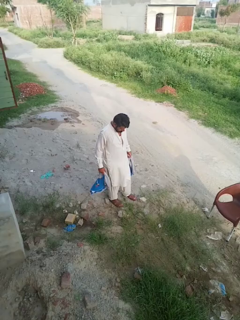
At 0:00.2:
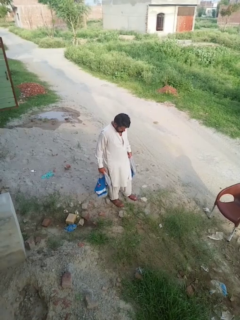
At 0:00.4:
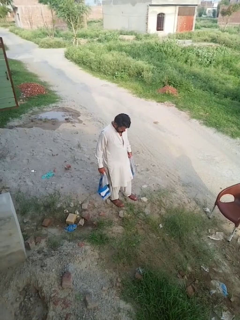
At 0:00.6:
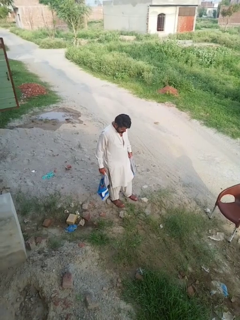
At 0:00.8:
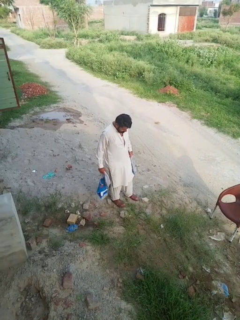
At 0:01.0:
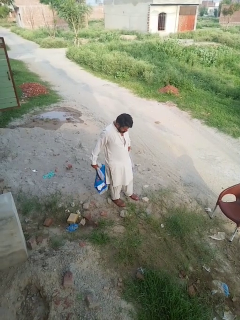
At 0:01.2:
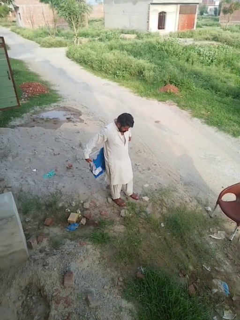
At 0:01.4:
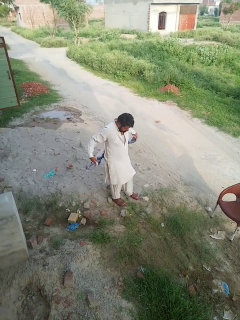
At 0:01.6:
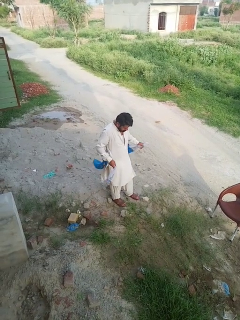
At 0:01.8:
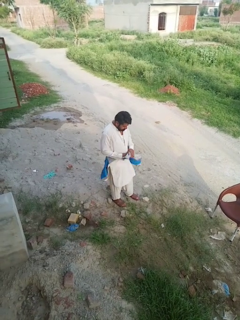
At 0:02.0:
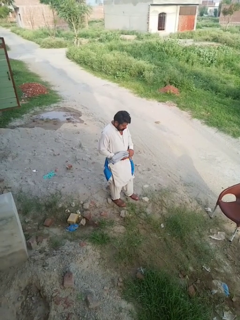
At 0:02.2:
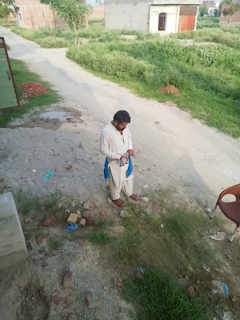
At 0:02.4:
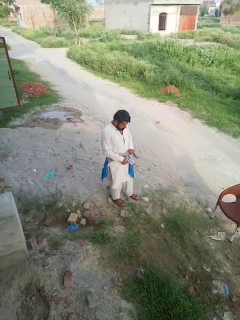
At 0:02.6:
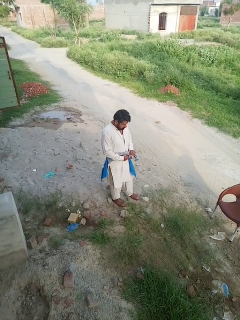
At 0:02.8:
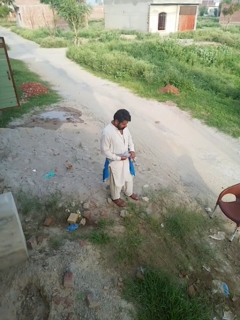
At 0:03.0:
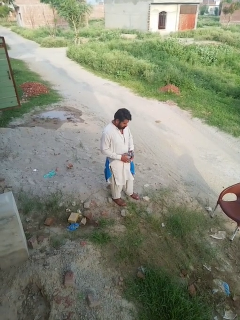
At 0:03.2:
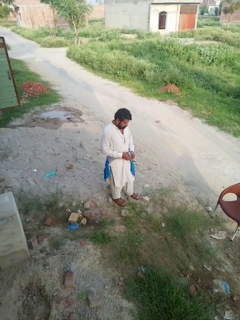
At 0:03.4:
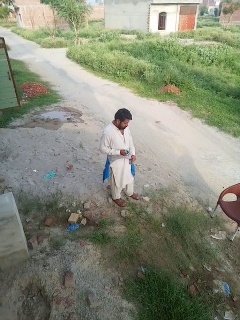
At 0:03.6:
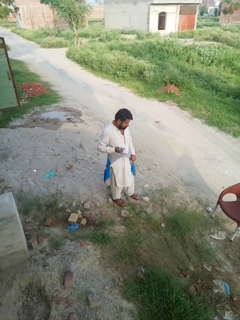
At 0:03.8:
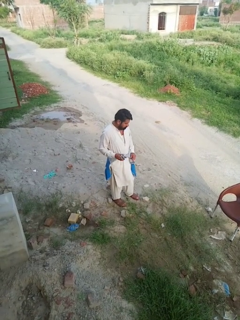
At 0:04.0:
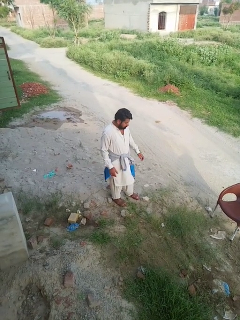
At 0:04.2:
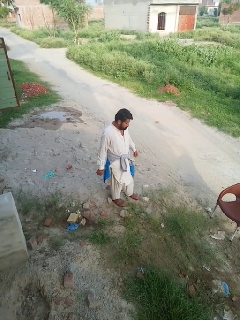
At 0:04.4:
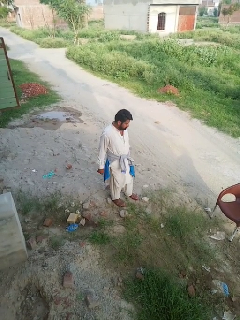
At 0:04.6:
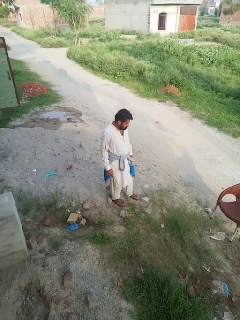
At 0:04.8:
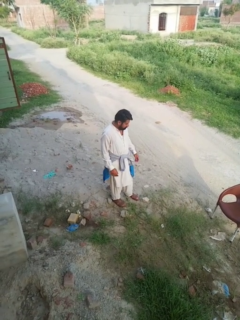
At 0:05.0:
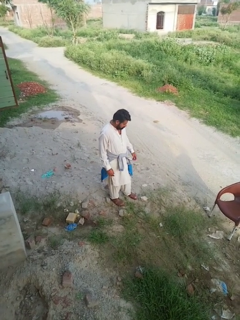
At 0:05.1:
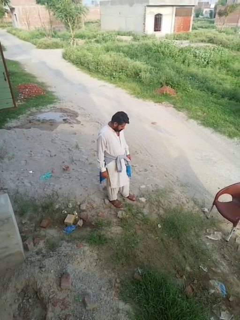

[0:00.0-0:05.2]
person ties jacket around waist

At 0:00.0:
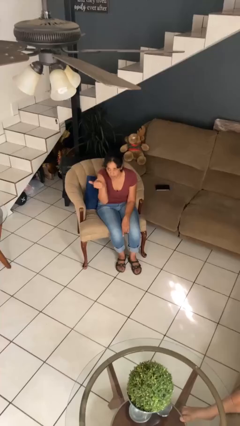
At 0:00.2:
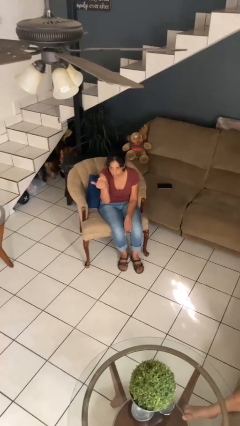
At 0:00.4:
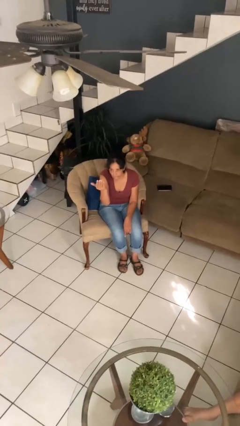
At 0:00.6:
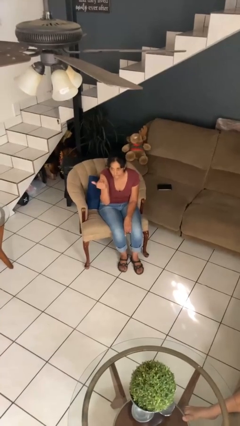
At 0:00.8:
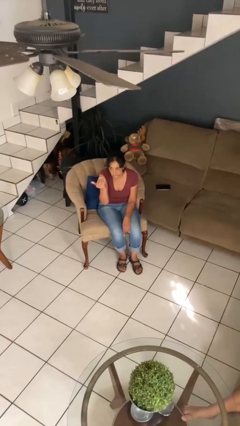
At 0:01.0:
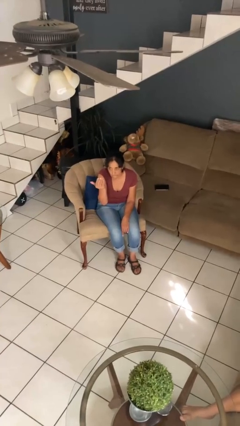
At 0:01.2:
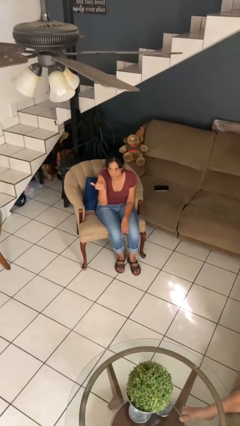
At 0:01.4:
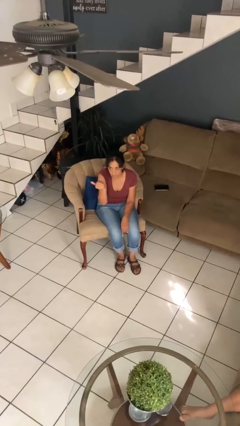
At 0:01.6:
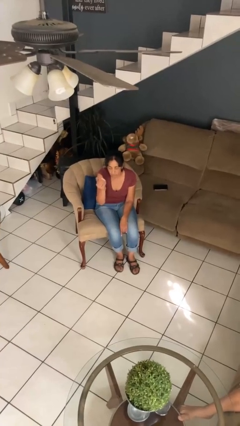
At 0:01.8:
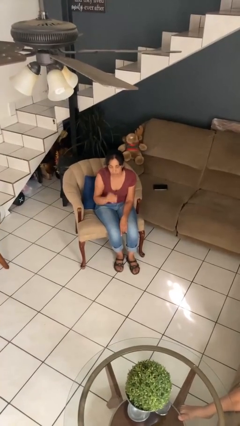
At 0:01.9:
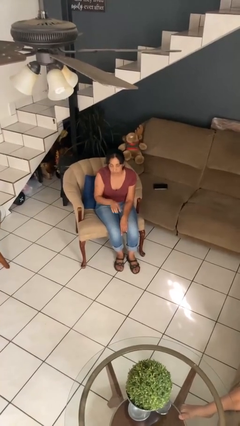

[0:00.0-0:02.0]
person gestures come here

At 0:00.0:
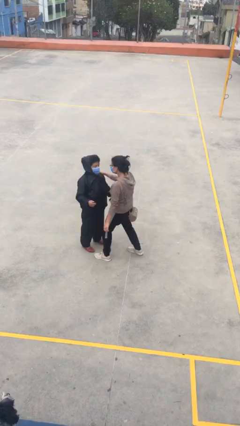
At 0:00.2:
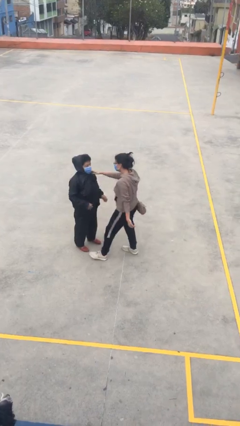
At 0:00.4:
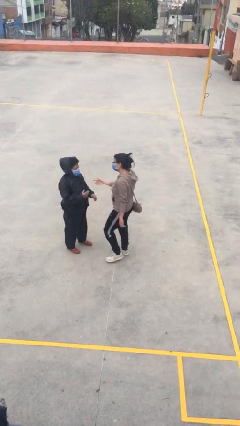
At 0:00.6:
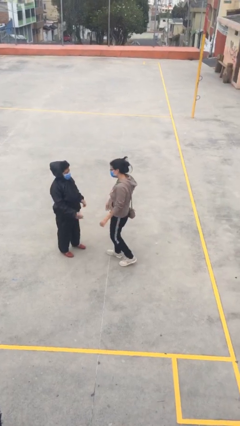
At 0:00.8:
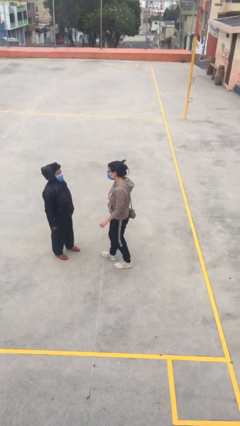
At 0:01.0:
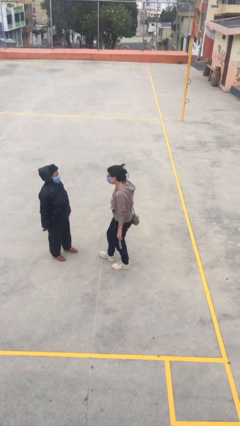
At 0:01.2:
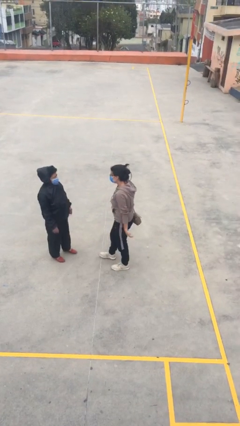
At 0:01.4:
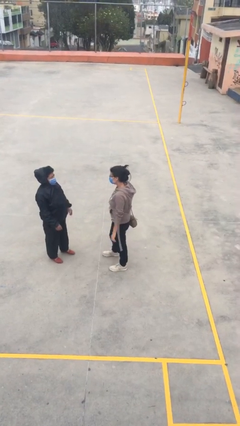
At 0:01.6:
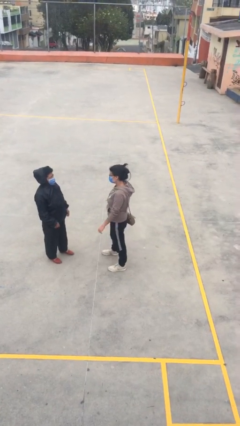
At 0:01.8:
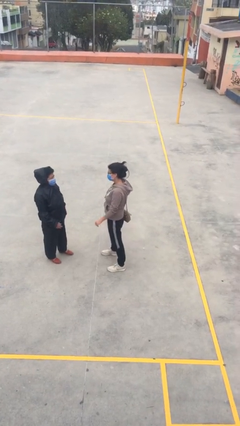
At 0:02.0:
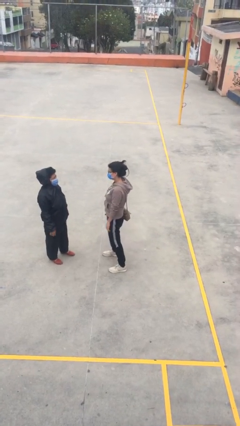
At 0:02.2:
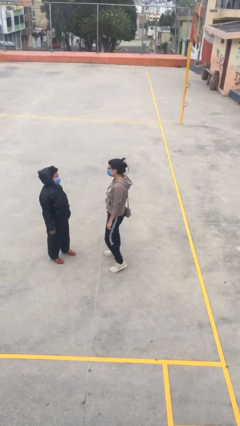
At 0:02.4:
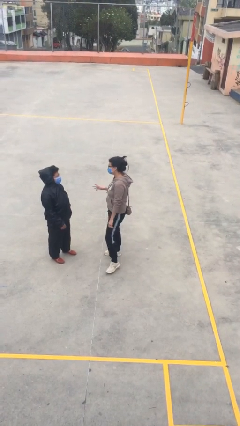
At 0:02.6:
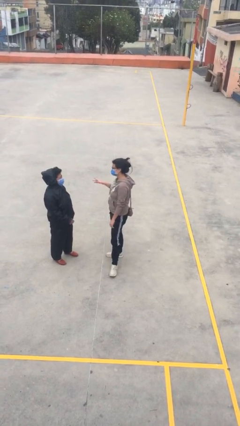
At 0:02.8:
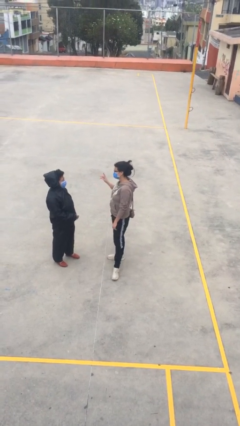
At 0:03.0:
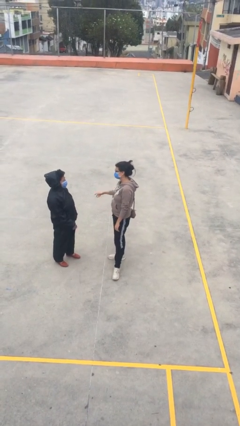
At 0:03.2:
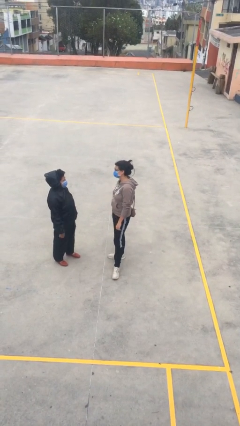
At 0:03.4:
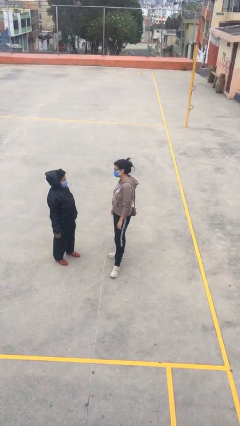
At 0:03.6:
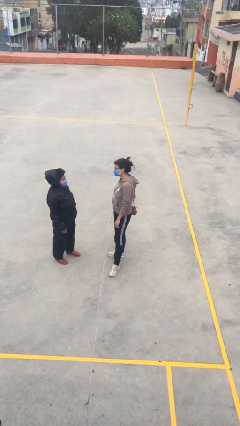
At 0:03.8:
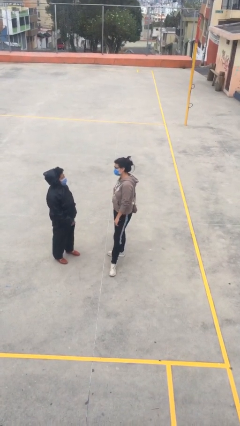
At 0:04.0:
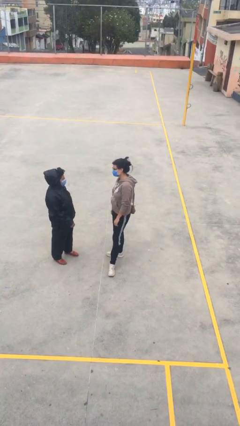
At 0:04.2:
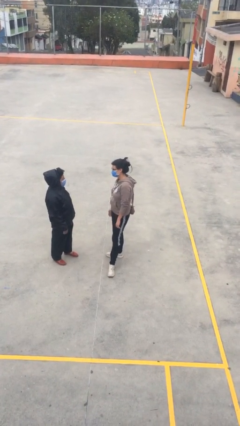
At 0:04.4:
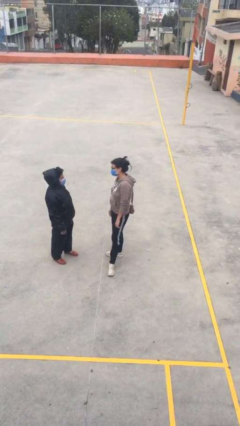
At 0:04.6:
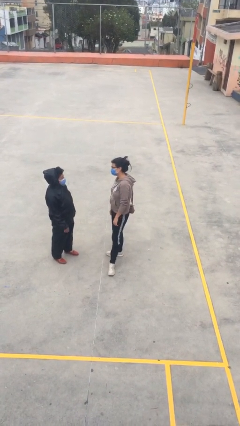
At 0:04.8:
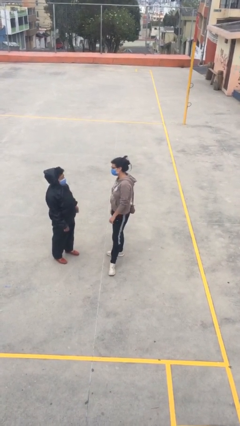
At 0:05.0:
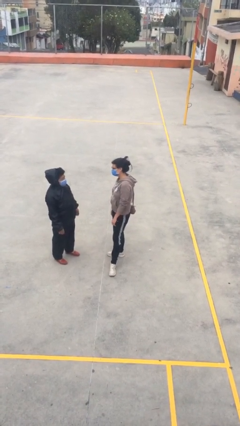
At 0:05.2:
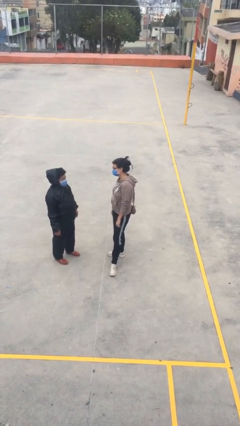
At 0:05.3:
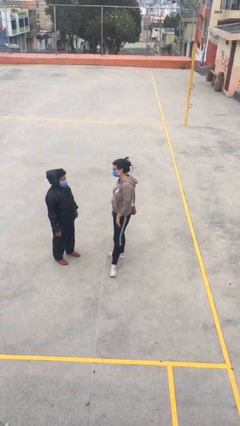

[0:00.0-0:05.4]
person talks to person

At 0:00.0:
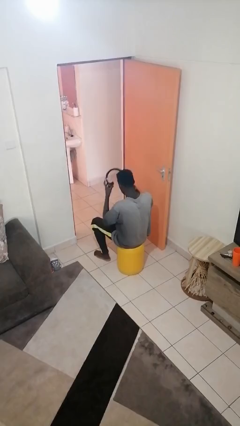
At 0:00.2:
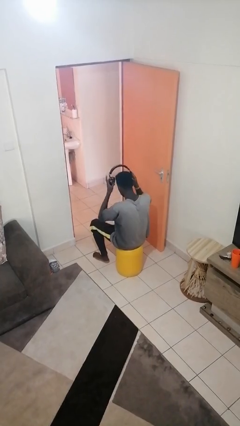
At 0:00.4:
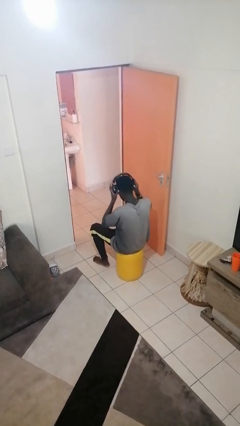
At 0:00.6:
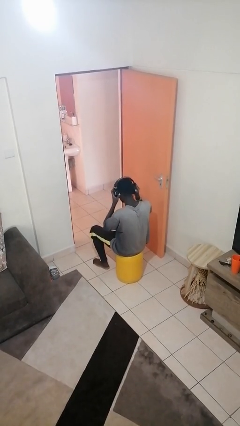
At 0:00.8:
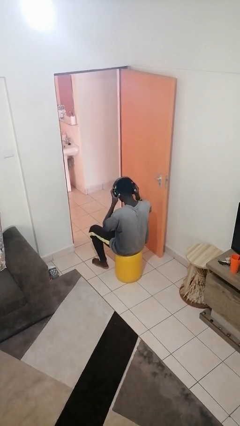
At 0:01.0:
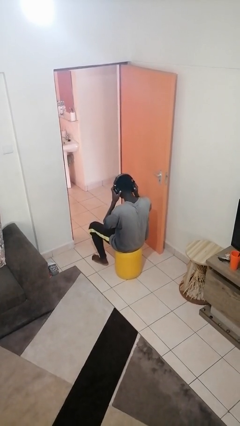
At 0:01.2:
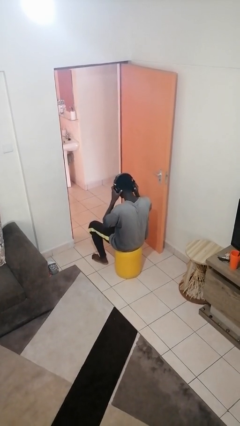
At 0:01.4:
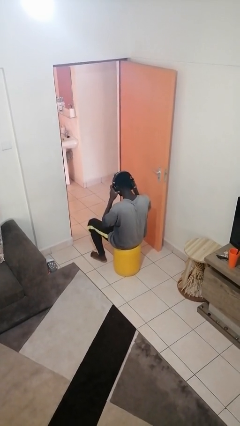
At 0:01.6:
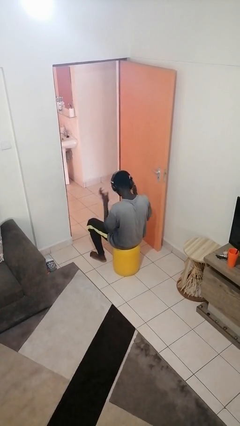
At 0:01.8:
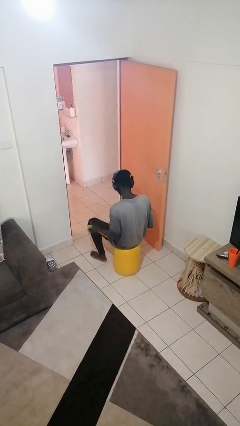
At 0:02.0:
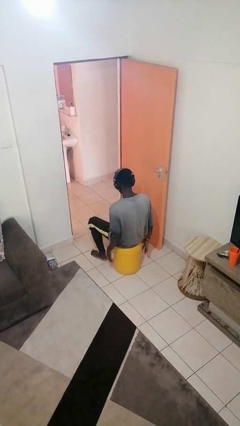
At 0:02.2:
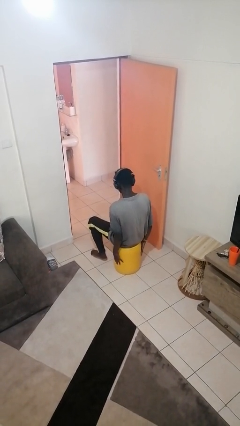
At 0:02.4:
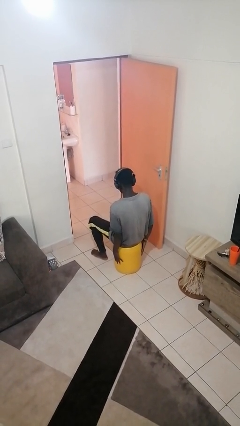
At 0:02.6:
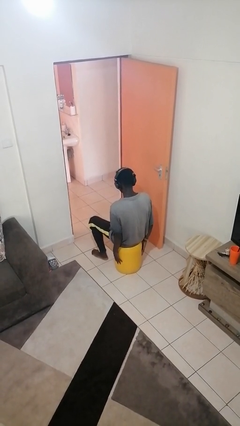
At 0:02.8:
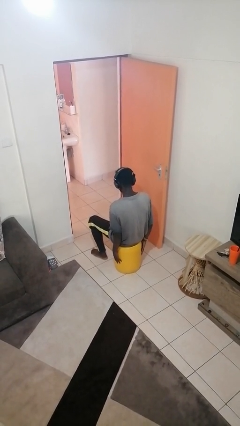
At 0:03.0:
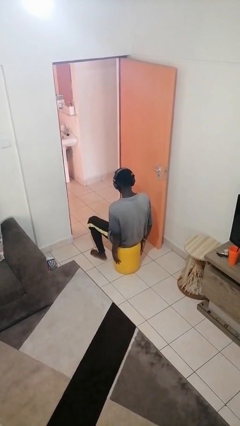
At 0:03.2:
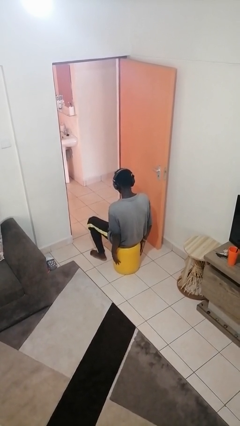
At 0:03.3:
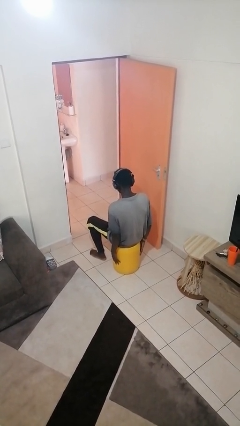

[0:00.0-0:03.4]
person puts on headphones

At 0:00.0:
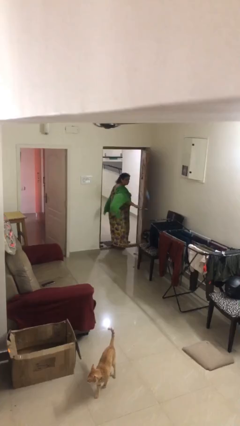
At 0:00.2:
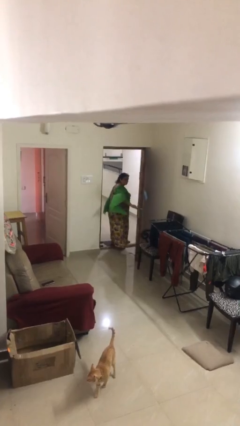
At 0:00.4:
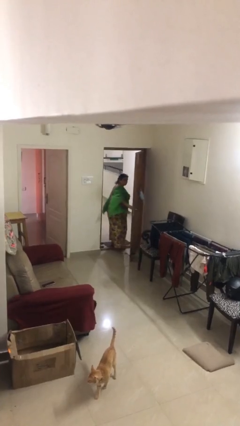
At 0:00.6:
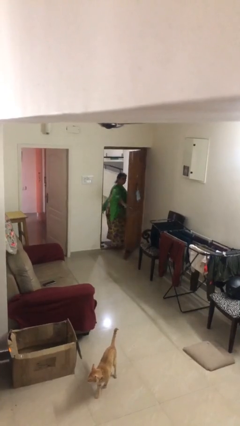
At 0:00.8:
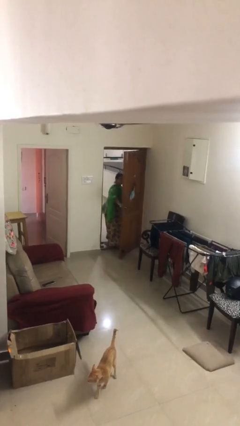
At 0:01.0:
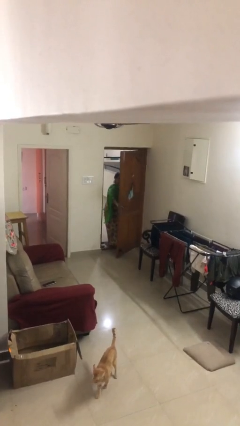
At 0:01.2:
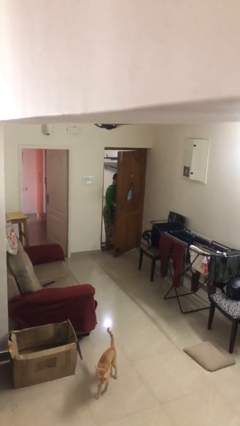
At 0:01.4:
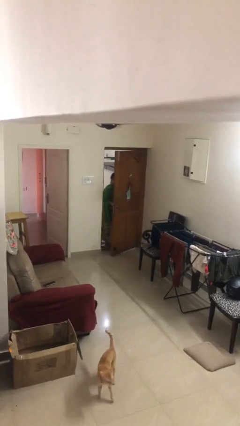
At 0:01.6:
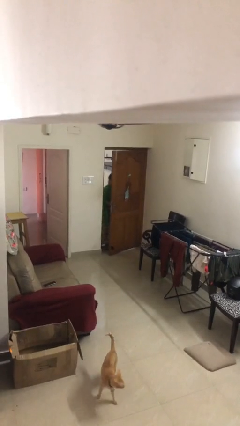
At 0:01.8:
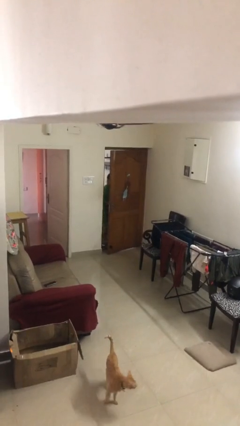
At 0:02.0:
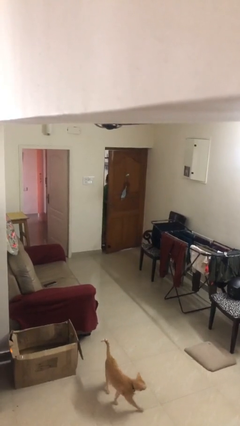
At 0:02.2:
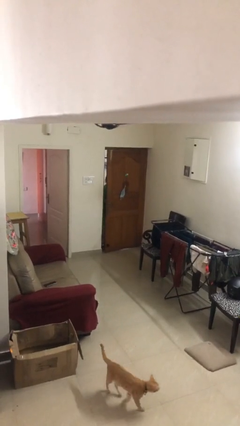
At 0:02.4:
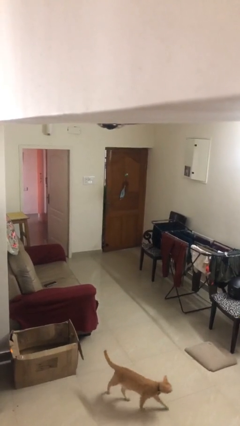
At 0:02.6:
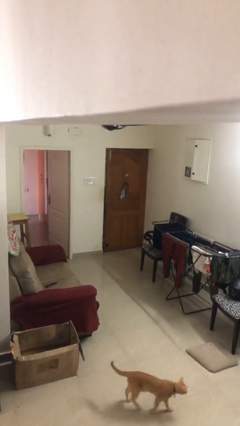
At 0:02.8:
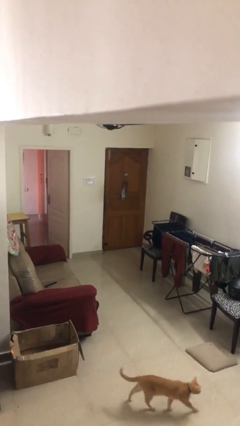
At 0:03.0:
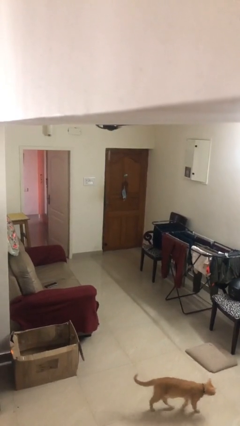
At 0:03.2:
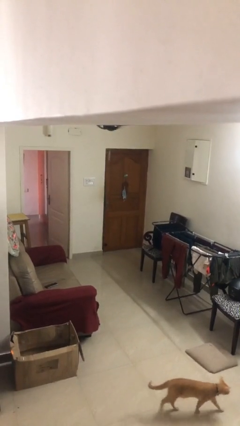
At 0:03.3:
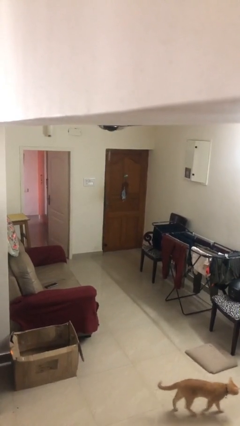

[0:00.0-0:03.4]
person closes facility door
